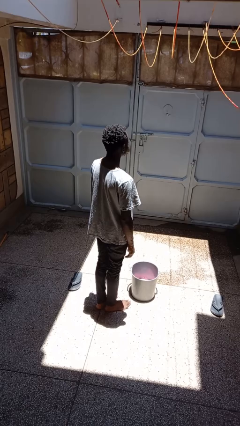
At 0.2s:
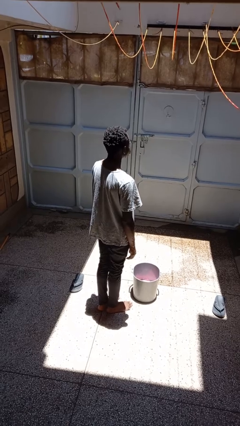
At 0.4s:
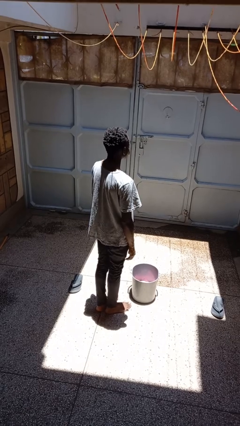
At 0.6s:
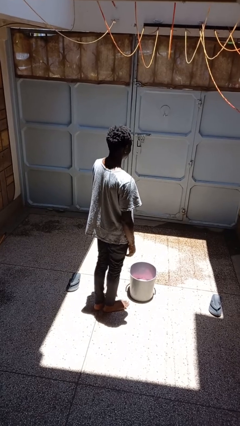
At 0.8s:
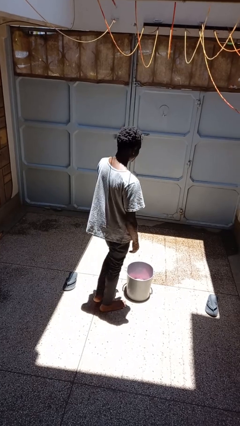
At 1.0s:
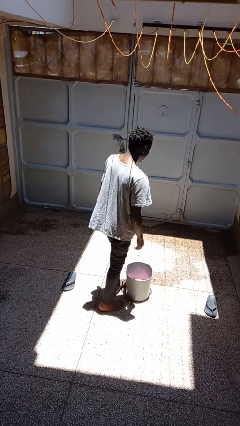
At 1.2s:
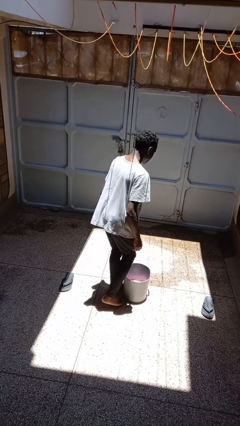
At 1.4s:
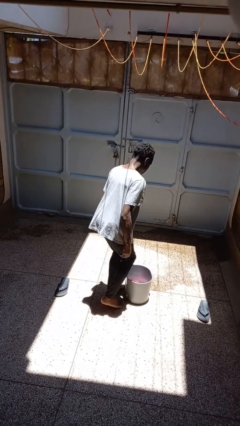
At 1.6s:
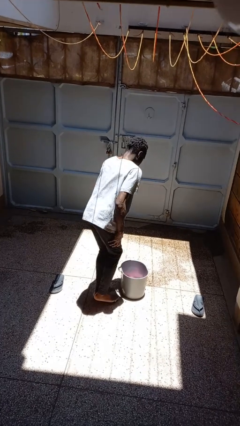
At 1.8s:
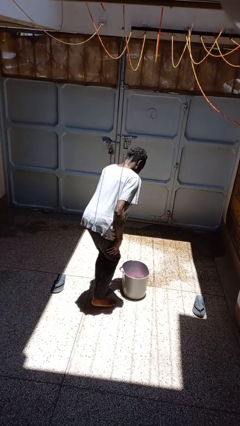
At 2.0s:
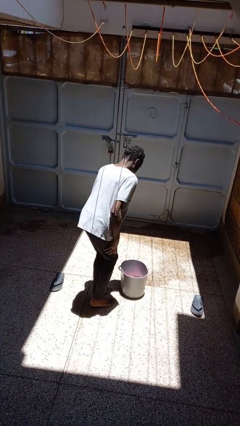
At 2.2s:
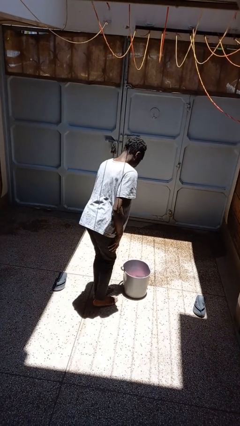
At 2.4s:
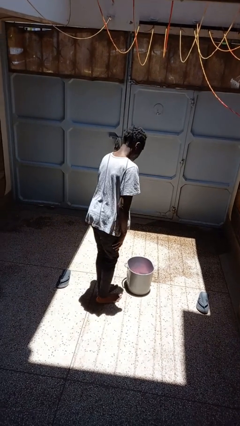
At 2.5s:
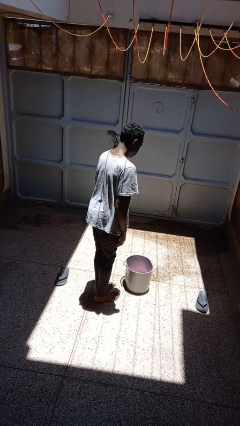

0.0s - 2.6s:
person stubs toe

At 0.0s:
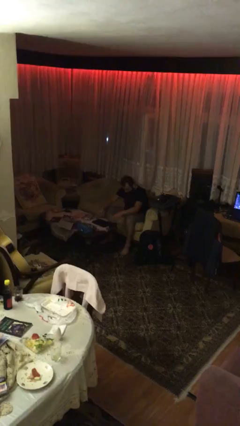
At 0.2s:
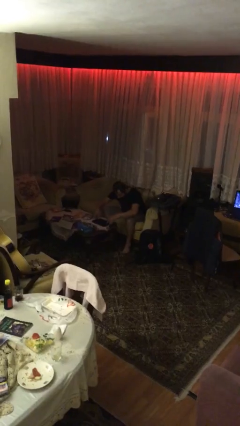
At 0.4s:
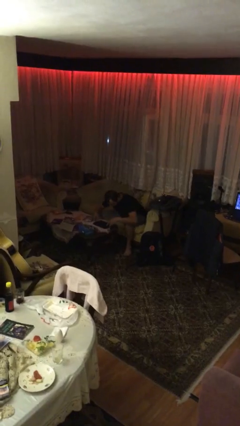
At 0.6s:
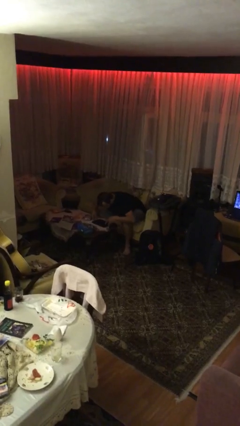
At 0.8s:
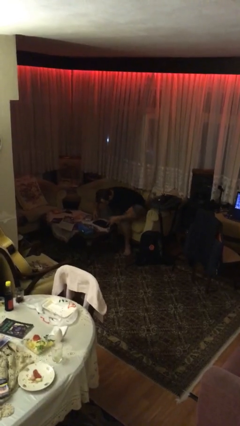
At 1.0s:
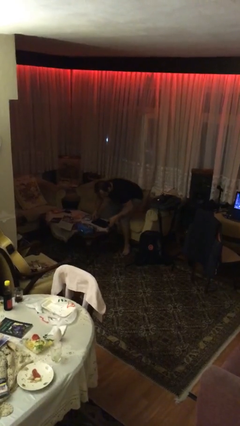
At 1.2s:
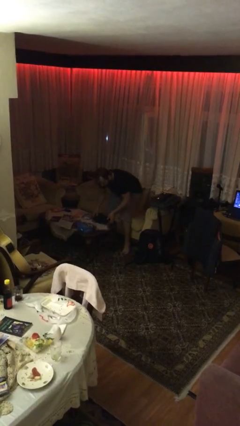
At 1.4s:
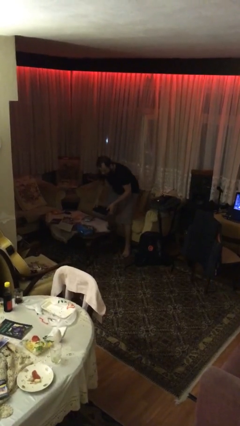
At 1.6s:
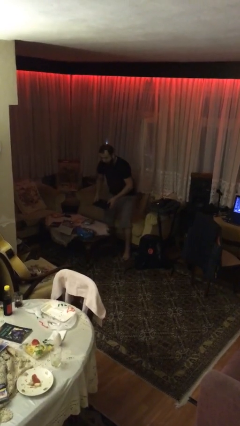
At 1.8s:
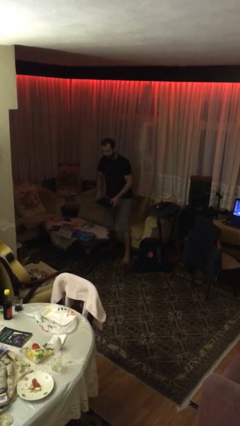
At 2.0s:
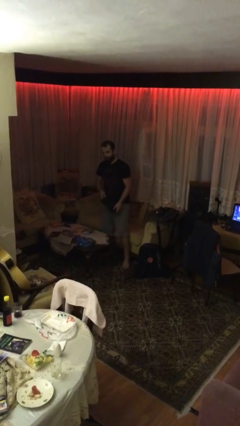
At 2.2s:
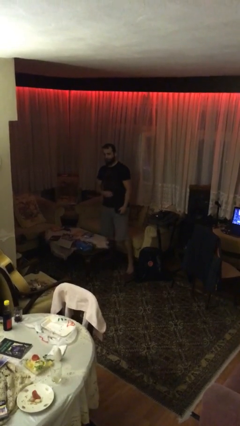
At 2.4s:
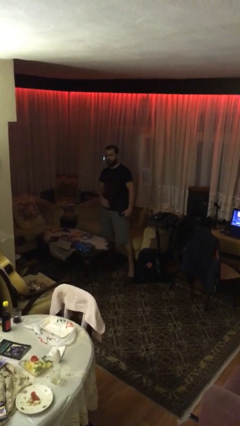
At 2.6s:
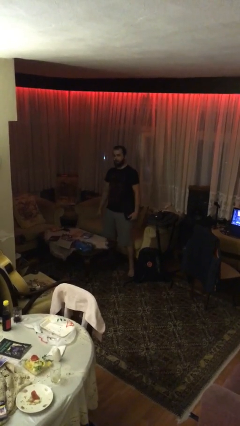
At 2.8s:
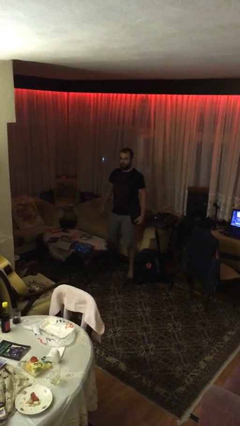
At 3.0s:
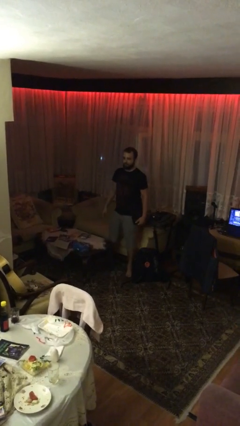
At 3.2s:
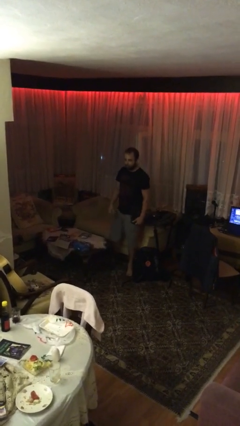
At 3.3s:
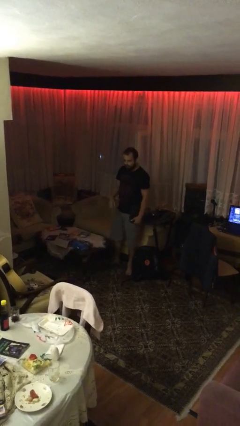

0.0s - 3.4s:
person stands up

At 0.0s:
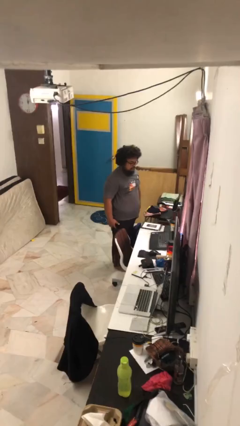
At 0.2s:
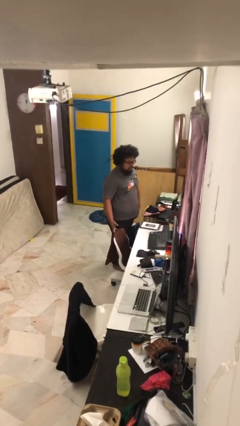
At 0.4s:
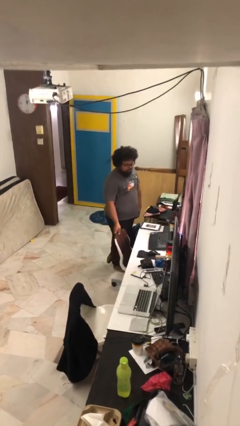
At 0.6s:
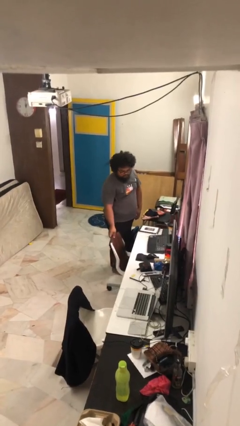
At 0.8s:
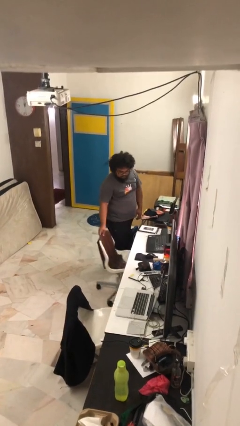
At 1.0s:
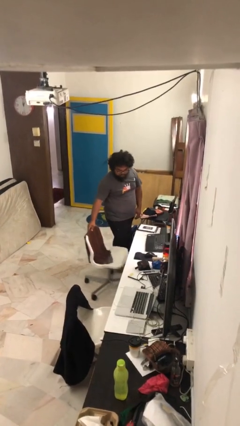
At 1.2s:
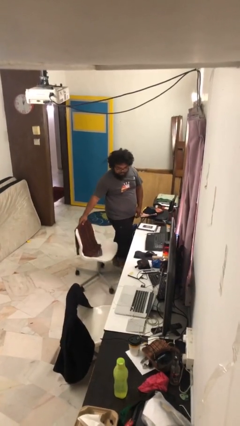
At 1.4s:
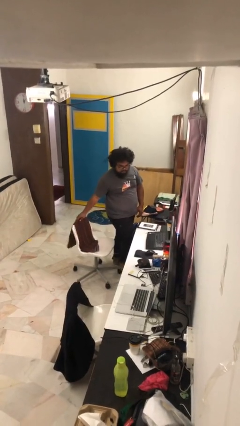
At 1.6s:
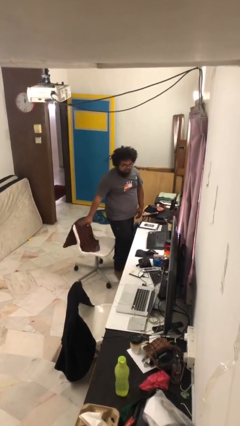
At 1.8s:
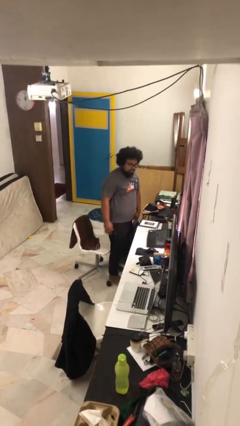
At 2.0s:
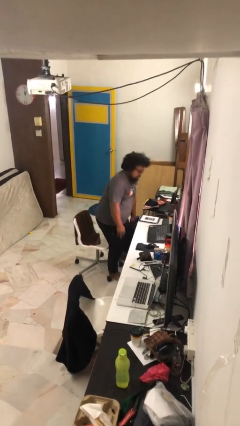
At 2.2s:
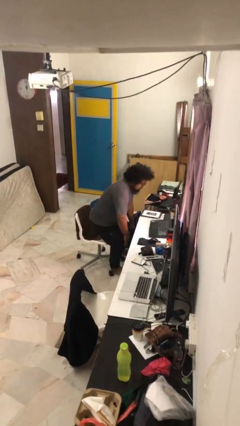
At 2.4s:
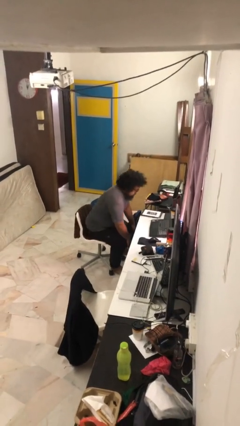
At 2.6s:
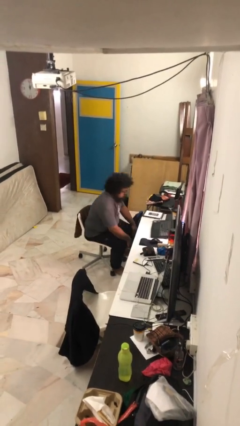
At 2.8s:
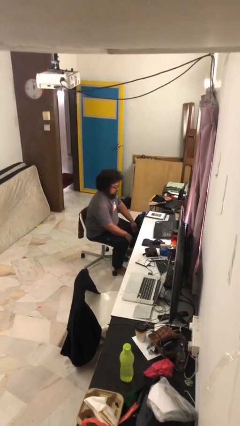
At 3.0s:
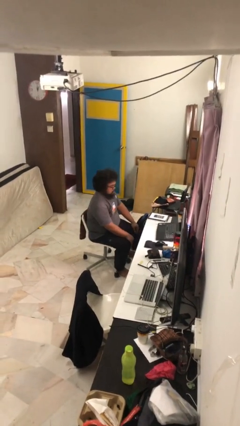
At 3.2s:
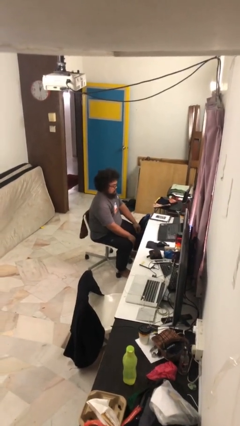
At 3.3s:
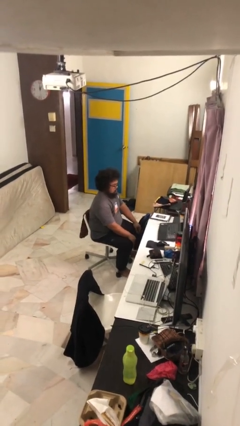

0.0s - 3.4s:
person sits down

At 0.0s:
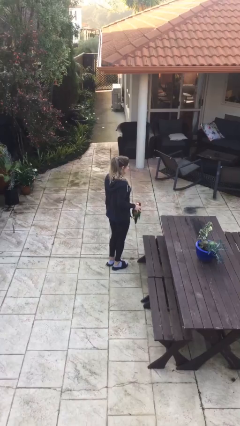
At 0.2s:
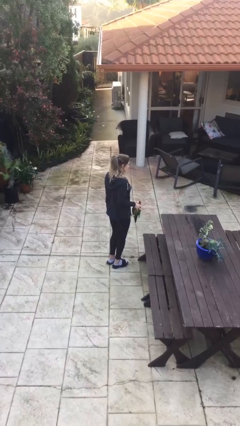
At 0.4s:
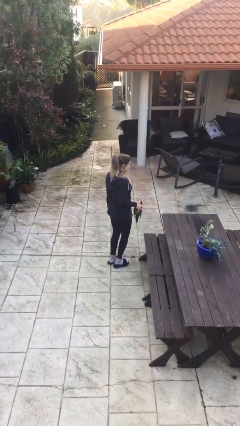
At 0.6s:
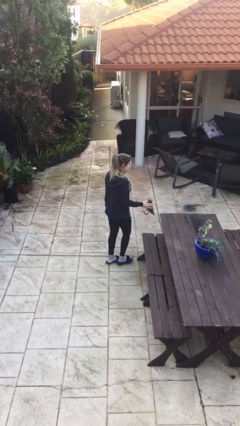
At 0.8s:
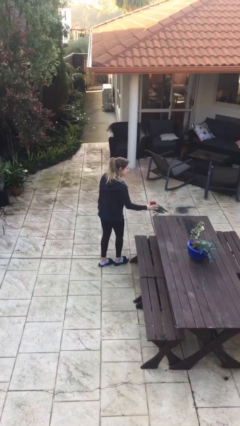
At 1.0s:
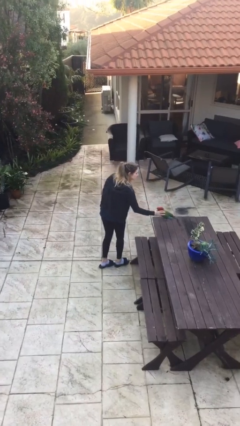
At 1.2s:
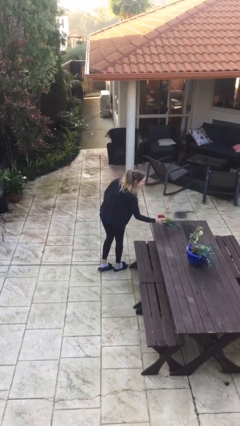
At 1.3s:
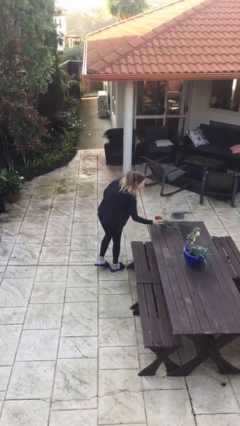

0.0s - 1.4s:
person puts down object on table

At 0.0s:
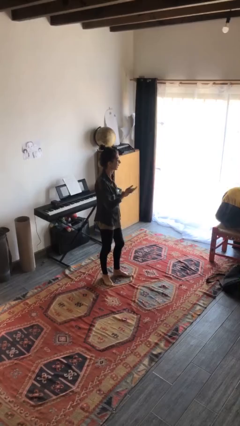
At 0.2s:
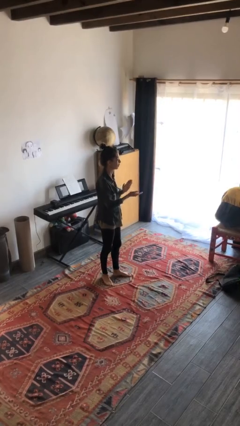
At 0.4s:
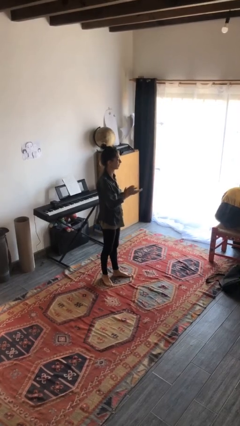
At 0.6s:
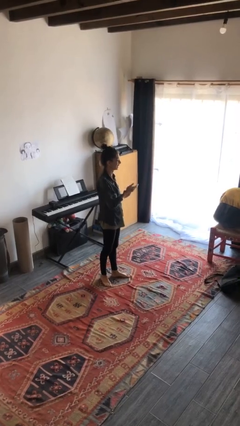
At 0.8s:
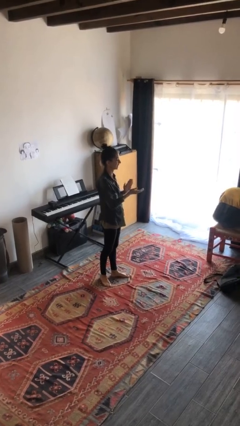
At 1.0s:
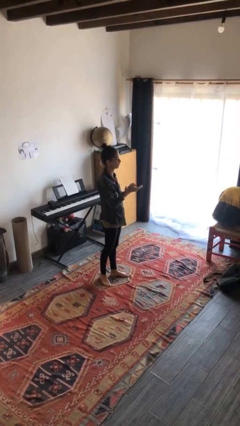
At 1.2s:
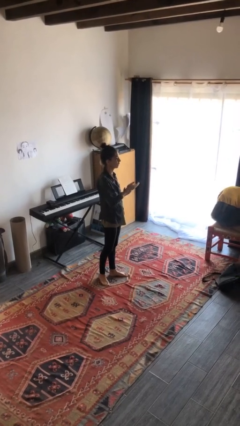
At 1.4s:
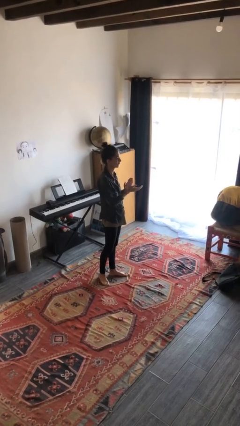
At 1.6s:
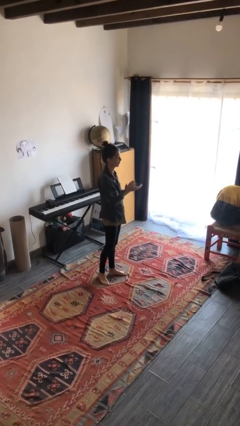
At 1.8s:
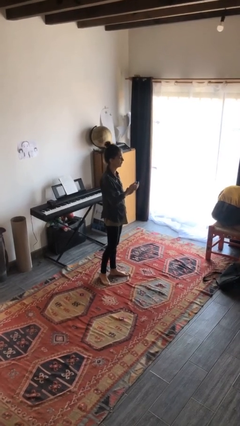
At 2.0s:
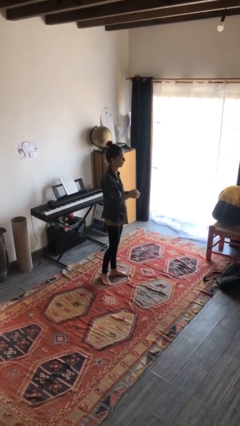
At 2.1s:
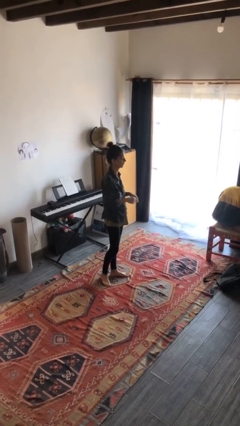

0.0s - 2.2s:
person claps hands

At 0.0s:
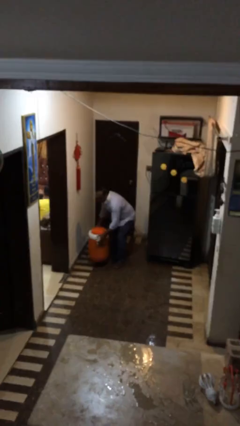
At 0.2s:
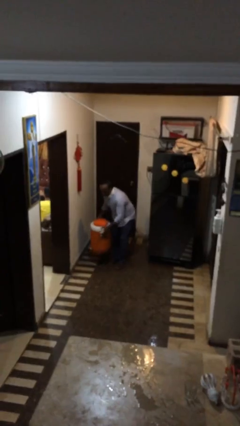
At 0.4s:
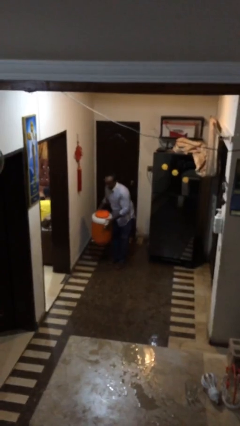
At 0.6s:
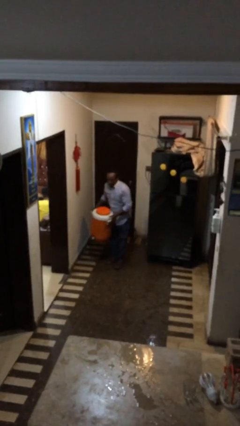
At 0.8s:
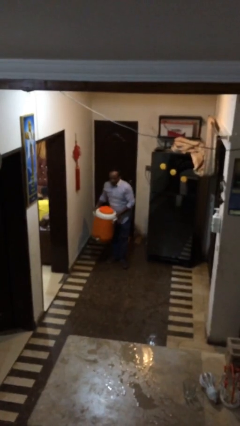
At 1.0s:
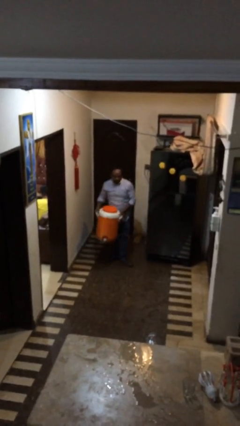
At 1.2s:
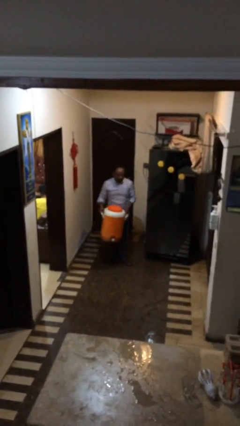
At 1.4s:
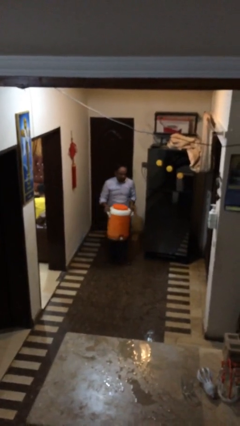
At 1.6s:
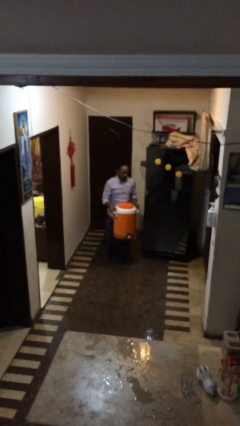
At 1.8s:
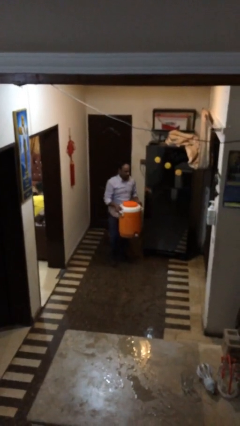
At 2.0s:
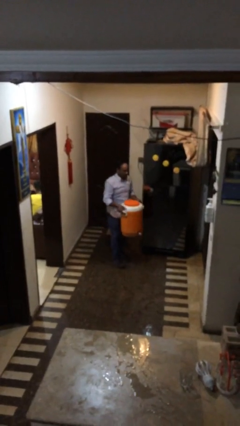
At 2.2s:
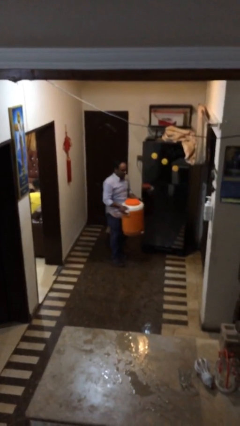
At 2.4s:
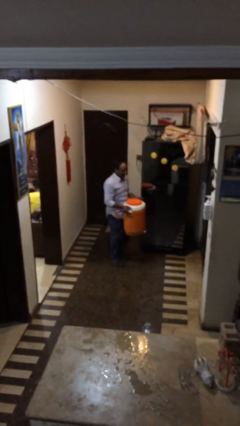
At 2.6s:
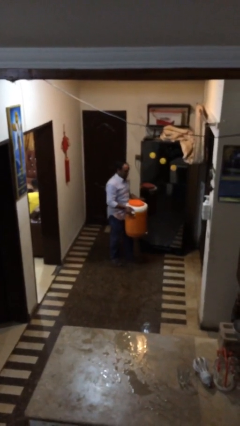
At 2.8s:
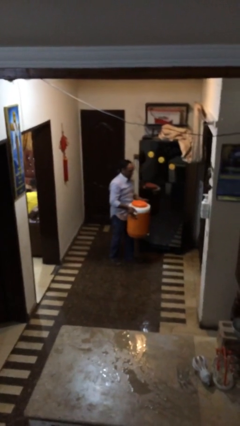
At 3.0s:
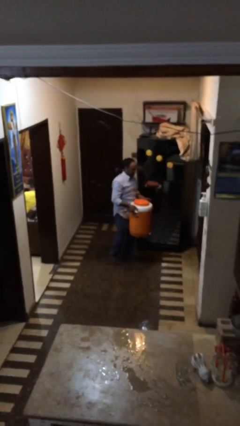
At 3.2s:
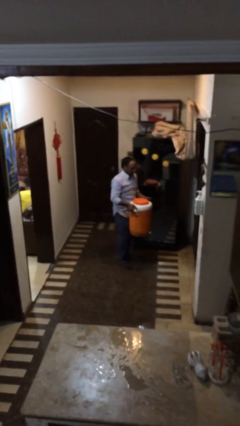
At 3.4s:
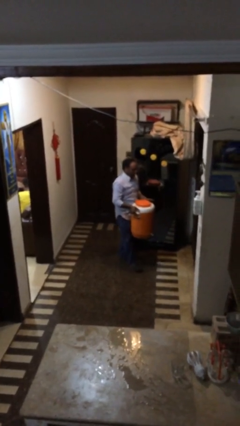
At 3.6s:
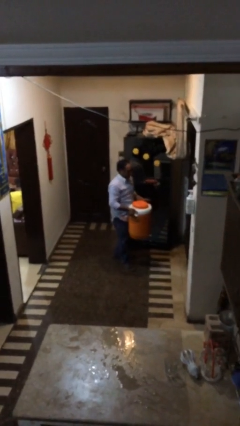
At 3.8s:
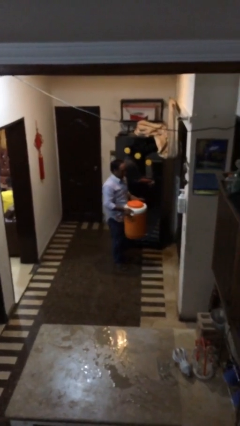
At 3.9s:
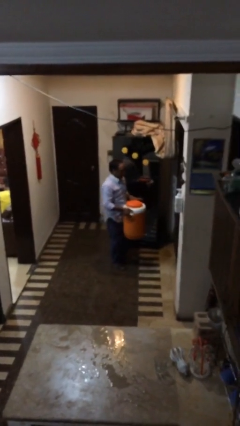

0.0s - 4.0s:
person carries heavy object
